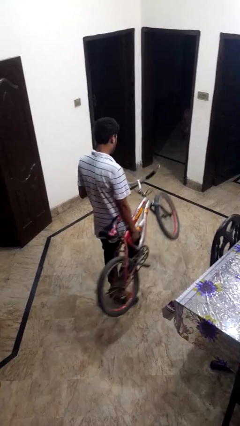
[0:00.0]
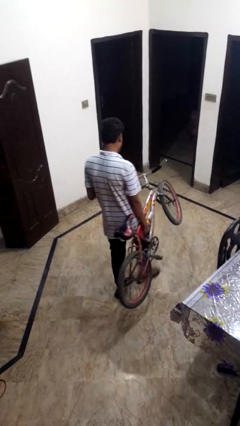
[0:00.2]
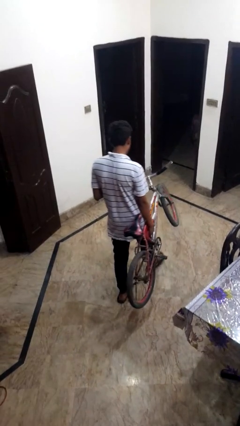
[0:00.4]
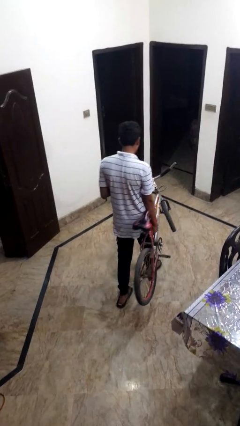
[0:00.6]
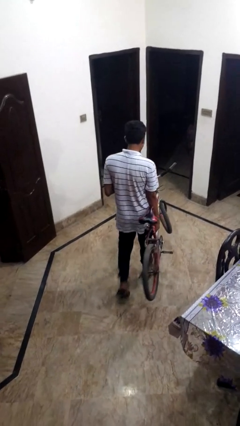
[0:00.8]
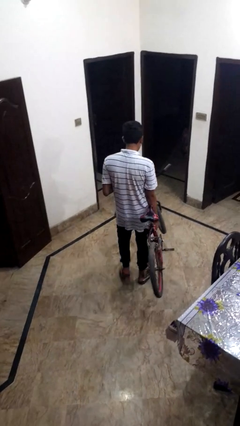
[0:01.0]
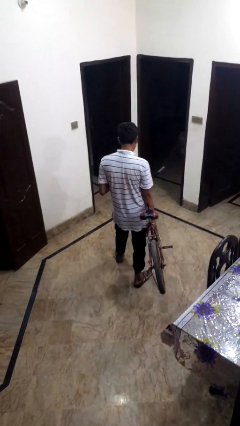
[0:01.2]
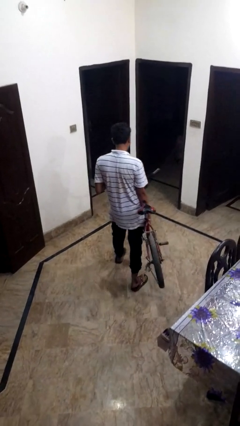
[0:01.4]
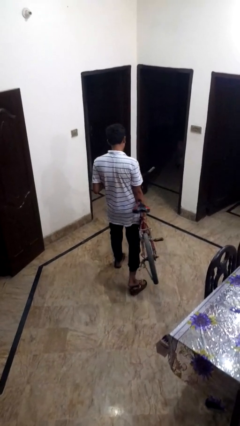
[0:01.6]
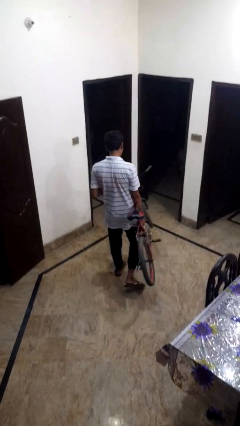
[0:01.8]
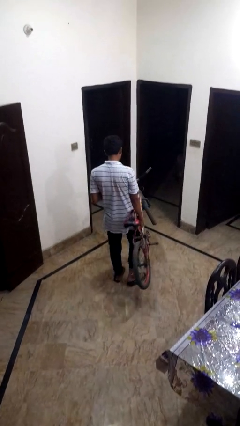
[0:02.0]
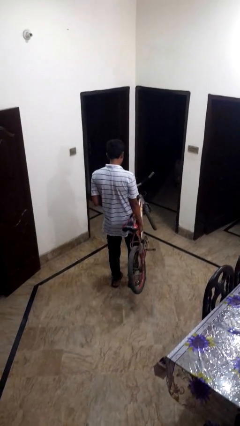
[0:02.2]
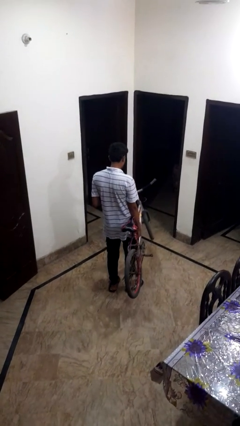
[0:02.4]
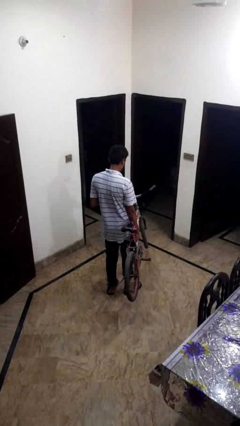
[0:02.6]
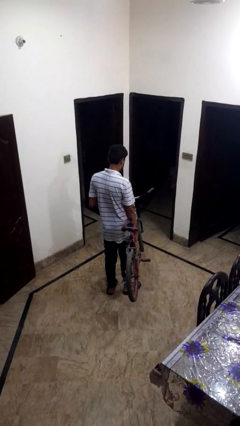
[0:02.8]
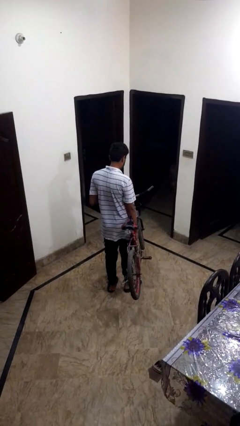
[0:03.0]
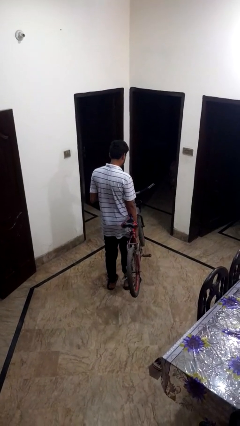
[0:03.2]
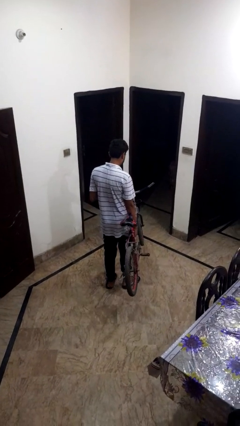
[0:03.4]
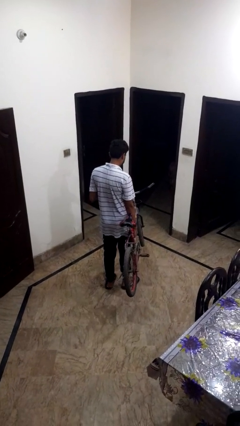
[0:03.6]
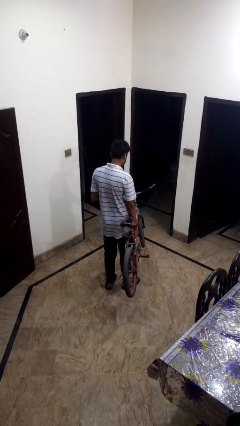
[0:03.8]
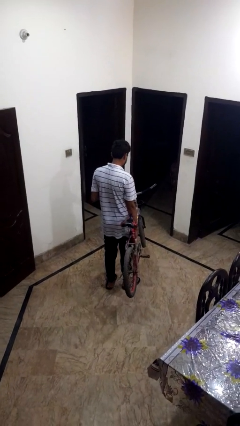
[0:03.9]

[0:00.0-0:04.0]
person carries bicycle

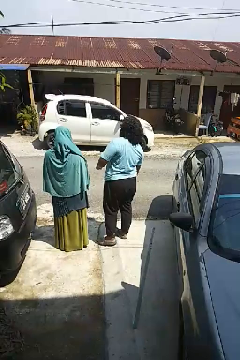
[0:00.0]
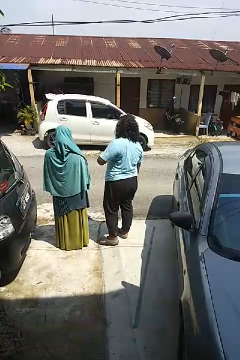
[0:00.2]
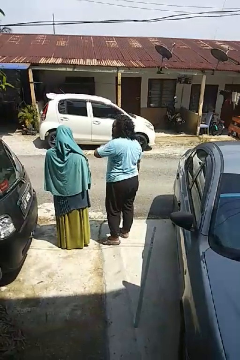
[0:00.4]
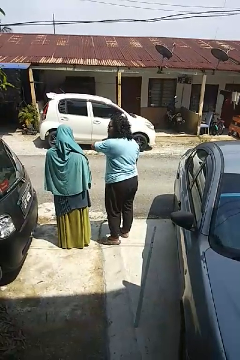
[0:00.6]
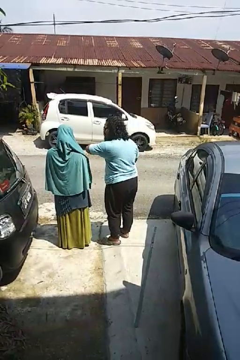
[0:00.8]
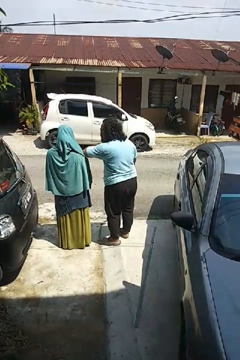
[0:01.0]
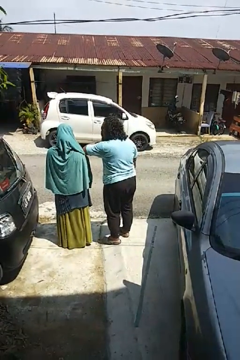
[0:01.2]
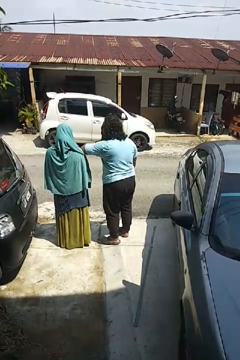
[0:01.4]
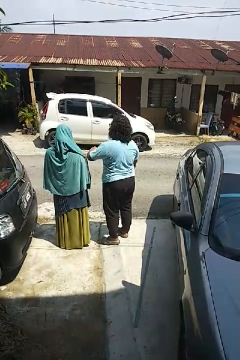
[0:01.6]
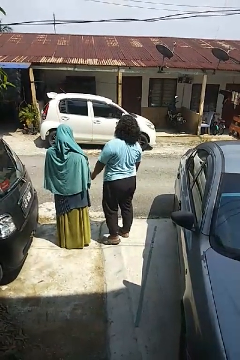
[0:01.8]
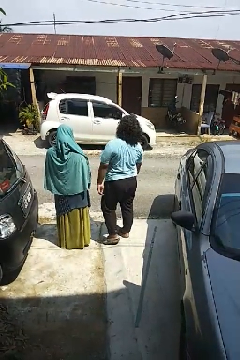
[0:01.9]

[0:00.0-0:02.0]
person nudges person with elbow

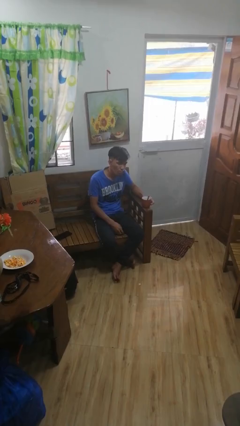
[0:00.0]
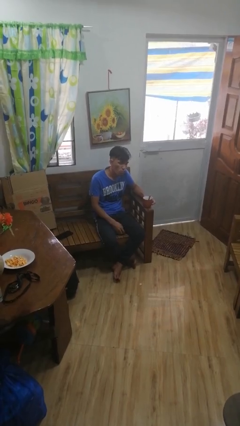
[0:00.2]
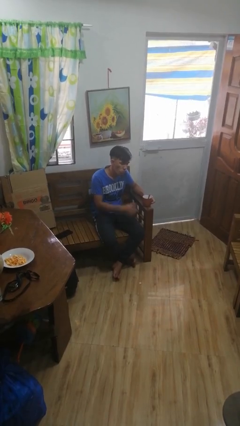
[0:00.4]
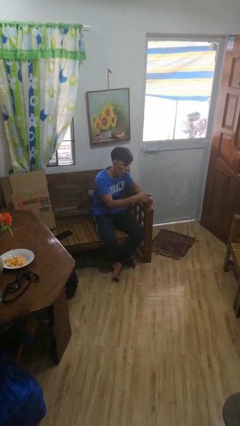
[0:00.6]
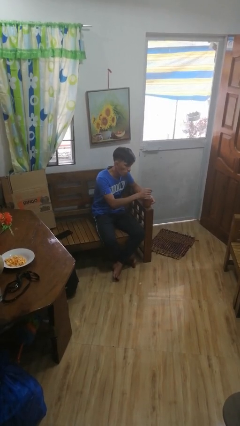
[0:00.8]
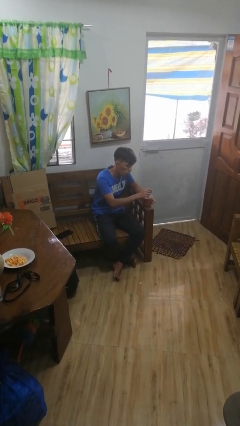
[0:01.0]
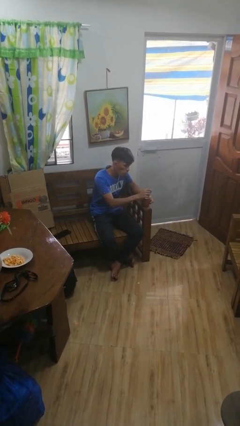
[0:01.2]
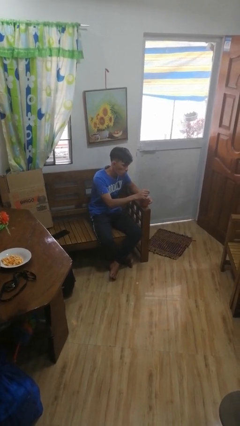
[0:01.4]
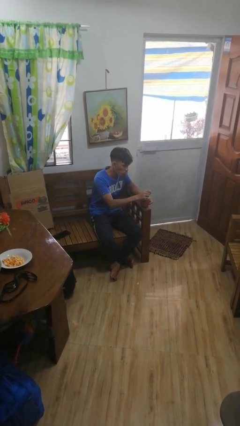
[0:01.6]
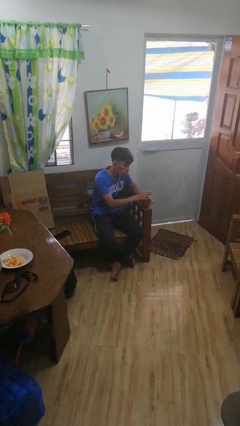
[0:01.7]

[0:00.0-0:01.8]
person stirs mug

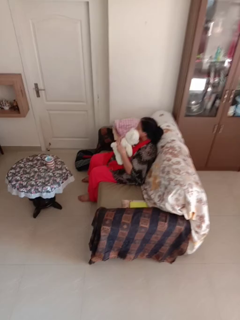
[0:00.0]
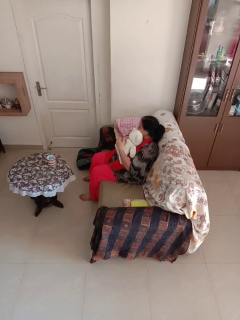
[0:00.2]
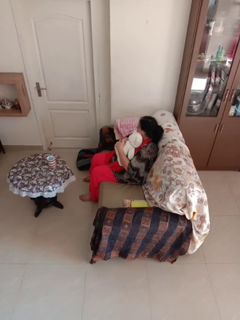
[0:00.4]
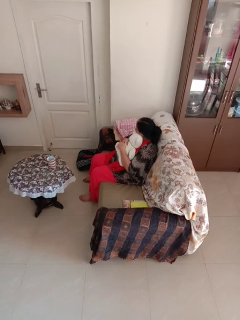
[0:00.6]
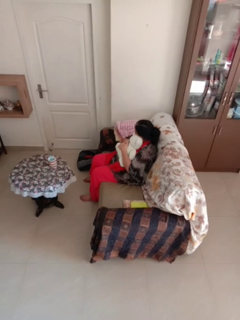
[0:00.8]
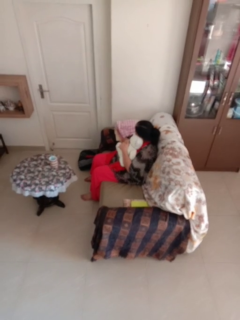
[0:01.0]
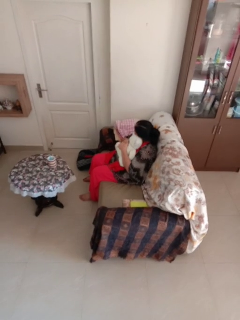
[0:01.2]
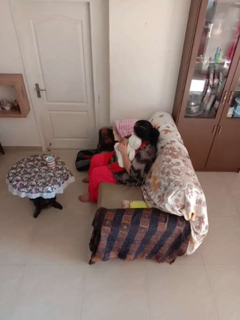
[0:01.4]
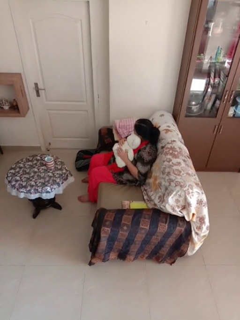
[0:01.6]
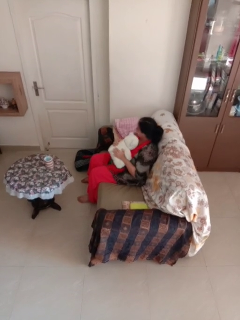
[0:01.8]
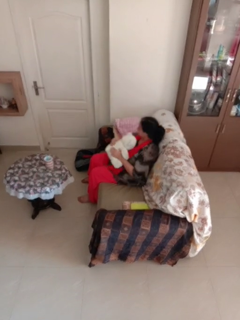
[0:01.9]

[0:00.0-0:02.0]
person hugs stuffed animal

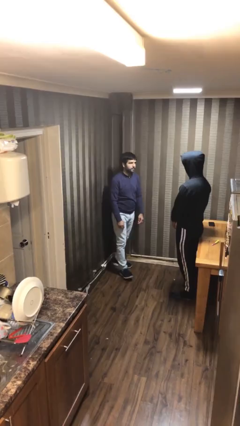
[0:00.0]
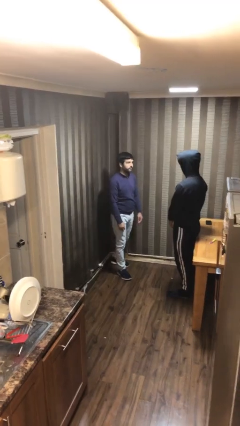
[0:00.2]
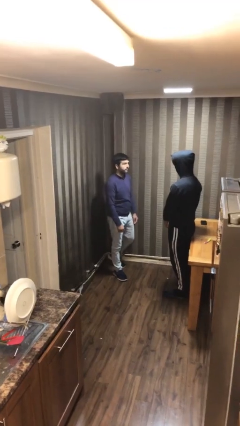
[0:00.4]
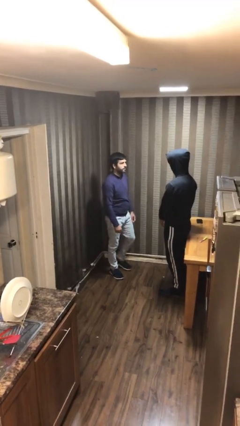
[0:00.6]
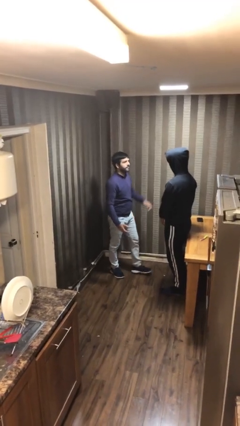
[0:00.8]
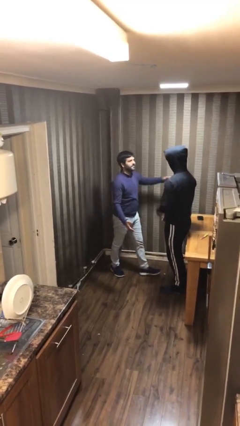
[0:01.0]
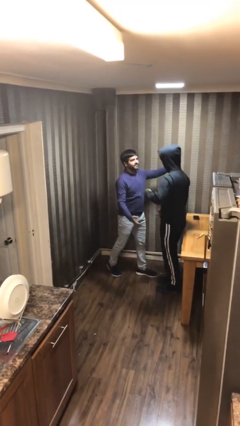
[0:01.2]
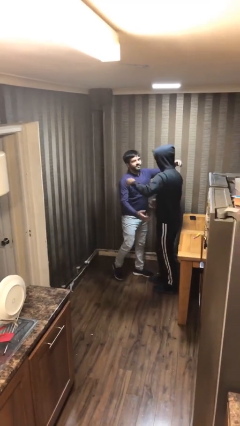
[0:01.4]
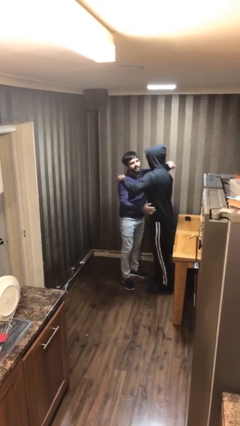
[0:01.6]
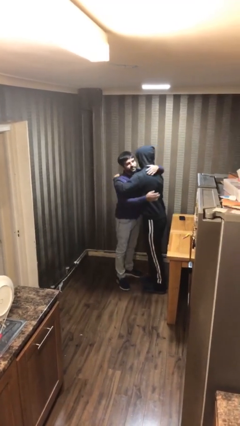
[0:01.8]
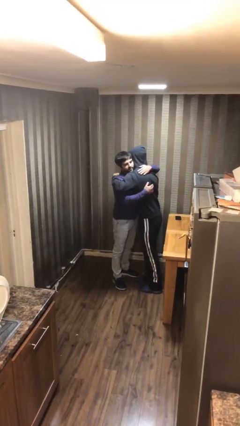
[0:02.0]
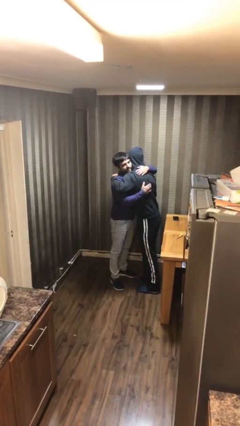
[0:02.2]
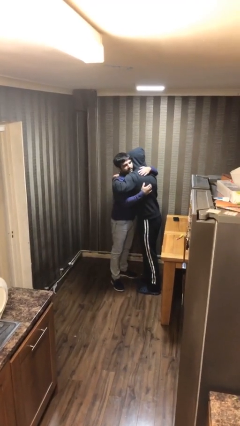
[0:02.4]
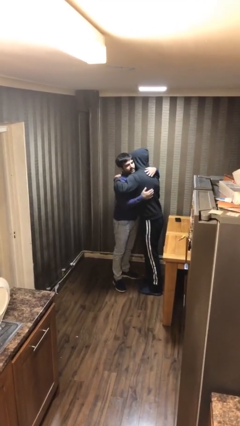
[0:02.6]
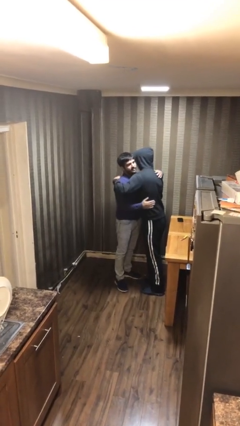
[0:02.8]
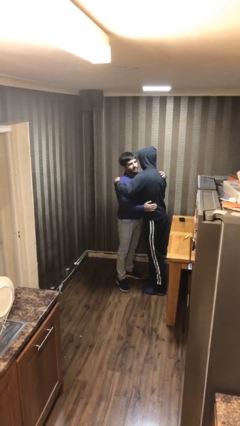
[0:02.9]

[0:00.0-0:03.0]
person embraces person

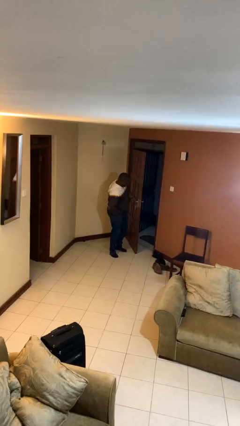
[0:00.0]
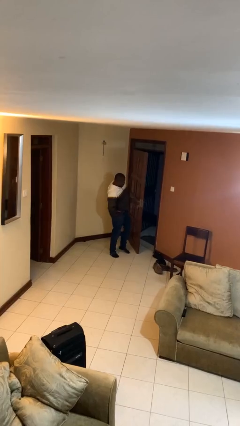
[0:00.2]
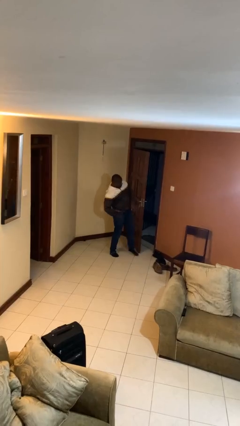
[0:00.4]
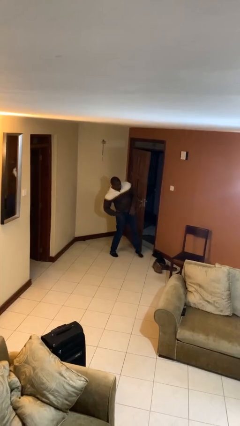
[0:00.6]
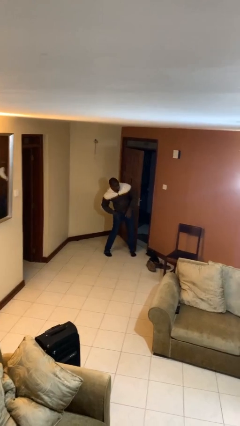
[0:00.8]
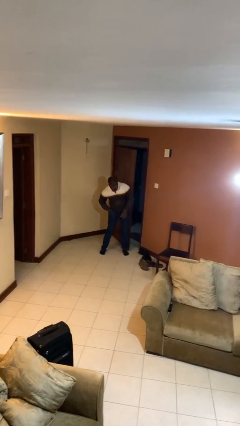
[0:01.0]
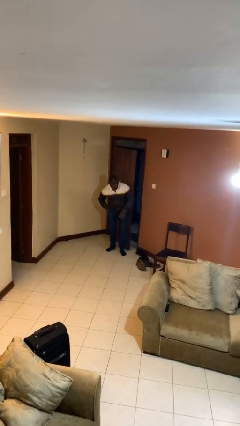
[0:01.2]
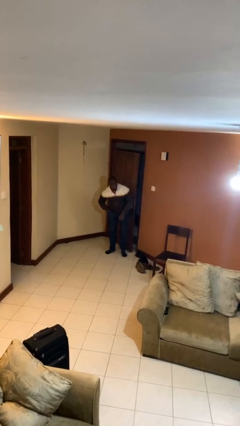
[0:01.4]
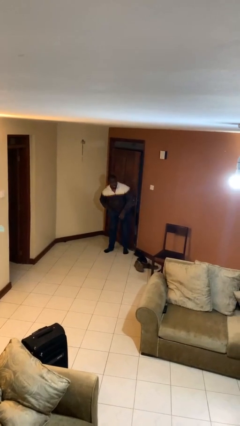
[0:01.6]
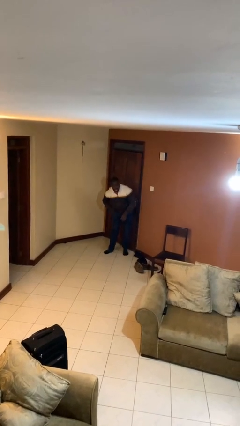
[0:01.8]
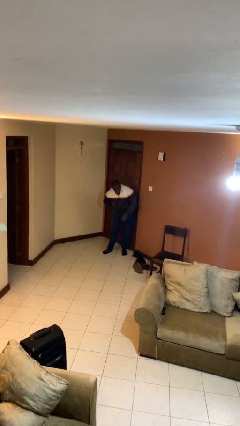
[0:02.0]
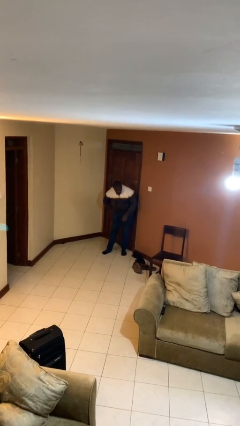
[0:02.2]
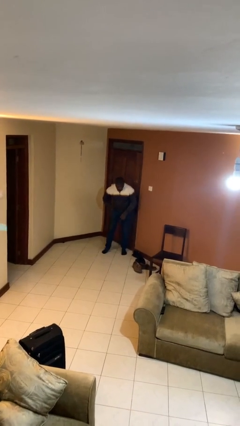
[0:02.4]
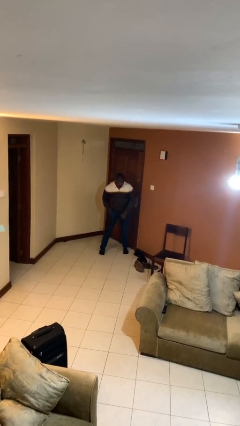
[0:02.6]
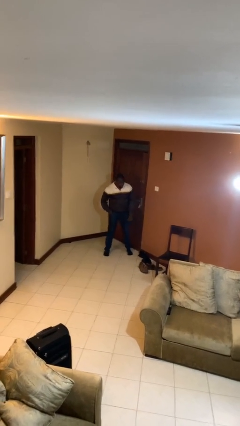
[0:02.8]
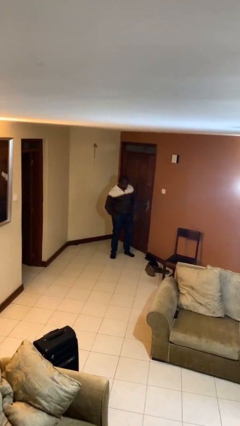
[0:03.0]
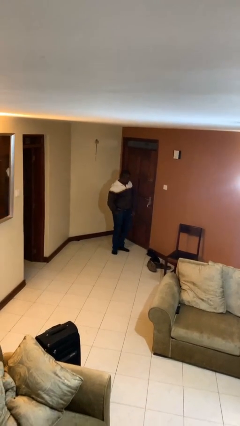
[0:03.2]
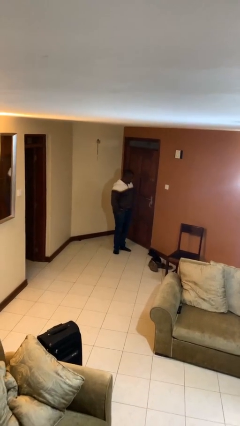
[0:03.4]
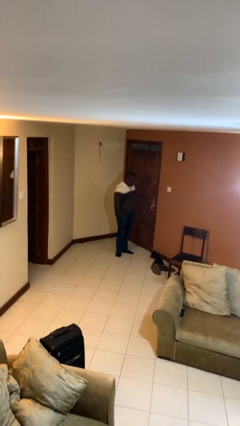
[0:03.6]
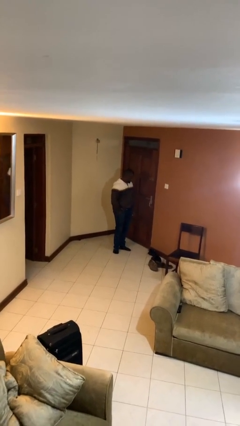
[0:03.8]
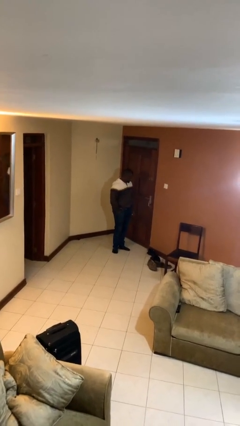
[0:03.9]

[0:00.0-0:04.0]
person closes door with hip

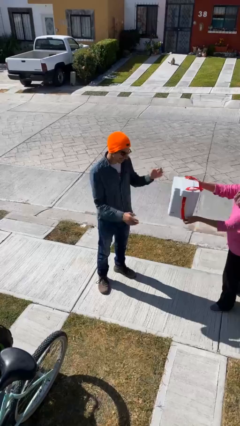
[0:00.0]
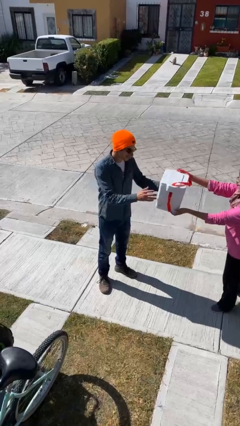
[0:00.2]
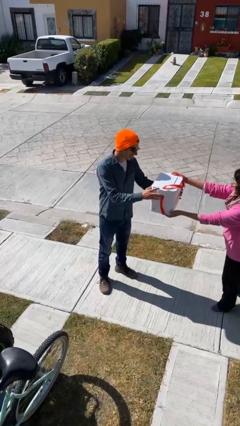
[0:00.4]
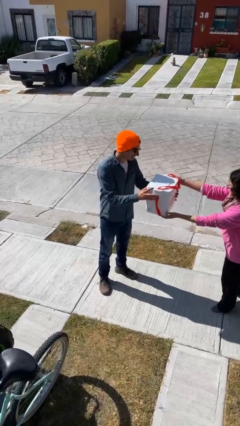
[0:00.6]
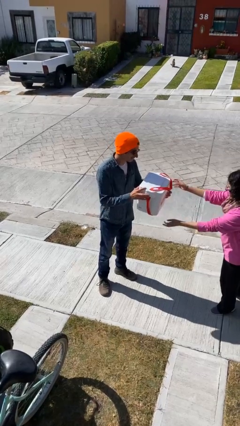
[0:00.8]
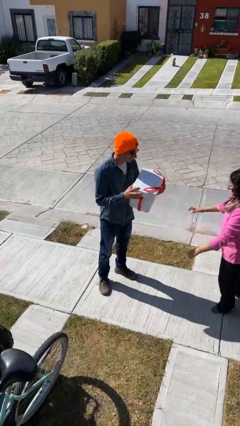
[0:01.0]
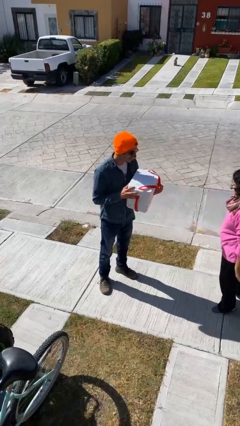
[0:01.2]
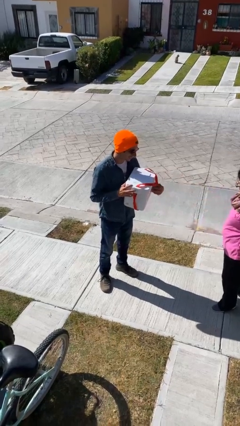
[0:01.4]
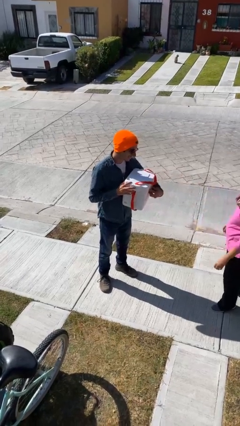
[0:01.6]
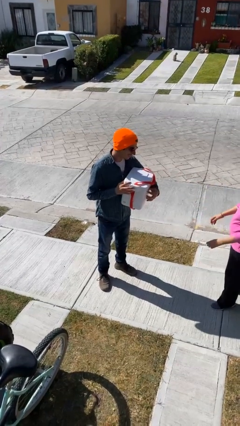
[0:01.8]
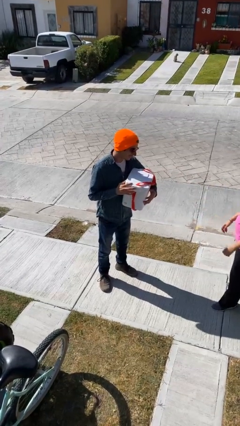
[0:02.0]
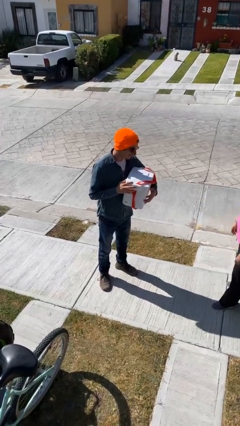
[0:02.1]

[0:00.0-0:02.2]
person transfers object to person
